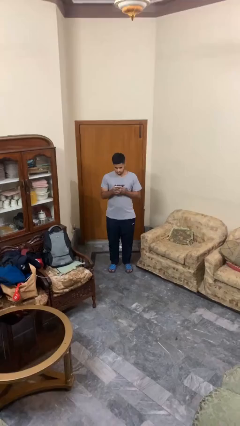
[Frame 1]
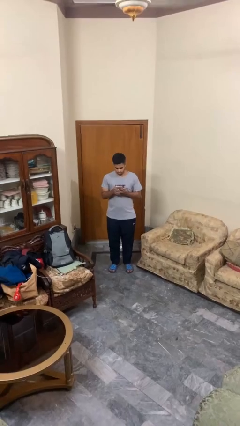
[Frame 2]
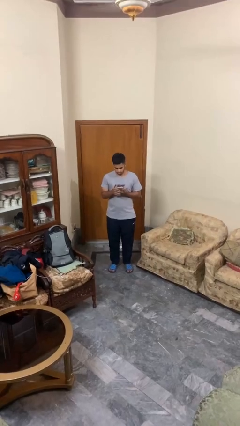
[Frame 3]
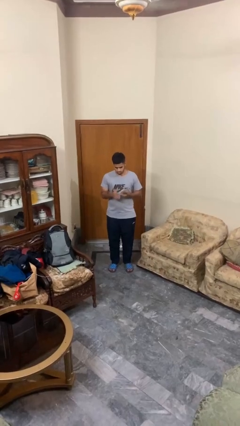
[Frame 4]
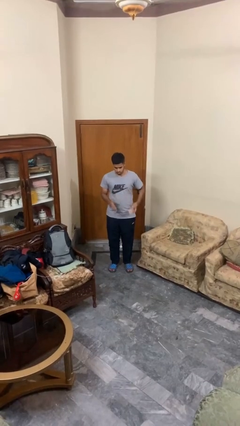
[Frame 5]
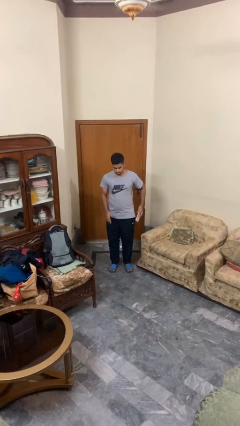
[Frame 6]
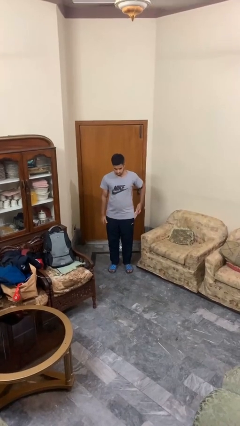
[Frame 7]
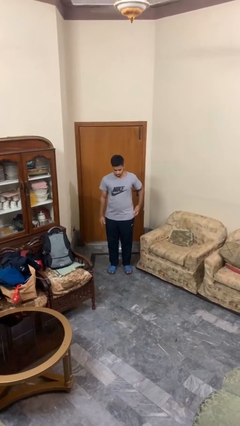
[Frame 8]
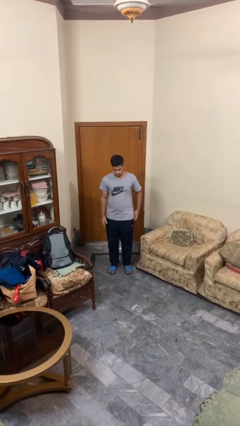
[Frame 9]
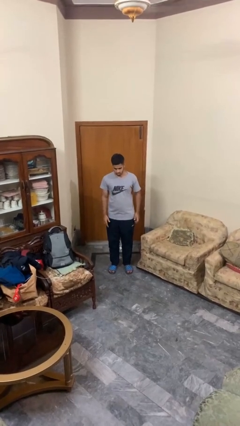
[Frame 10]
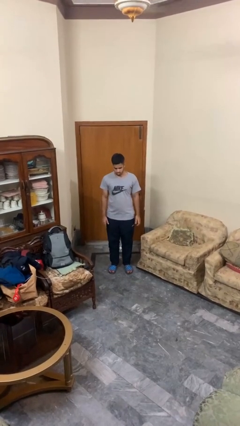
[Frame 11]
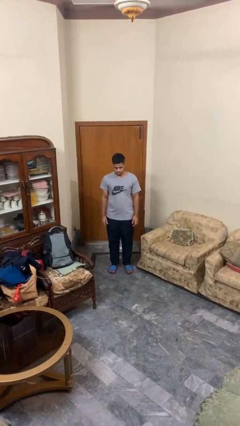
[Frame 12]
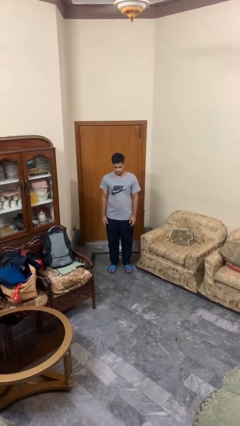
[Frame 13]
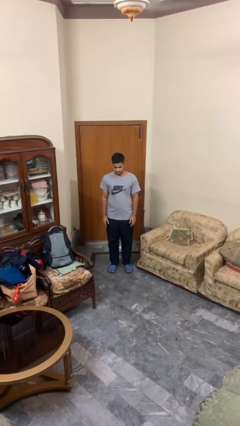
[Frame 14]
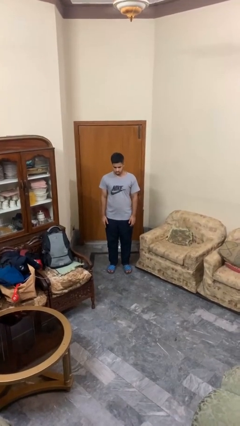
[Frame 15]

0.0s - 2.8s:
person puts phone into pocket

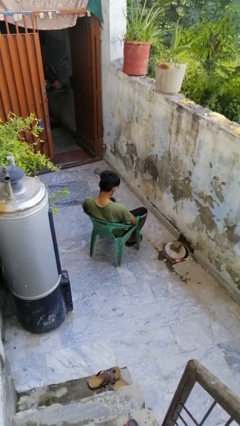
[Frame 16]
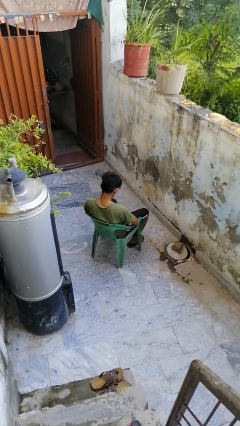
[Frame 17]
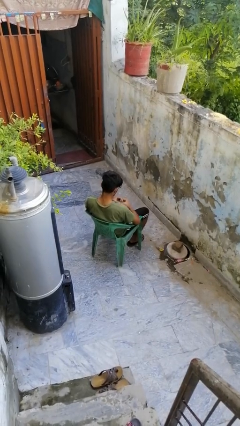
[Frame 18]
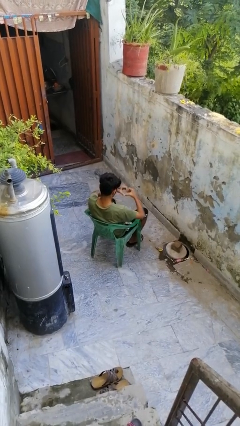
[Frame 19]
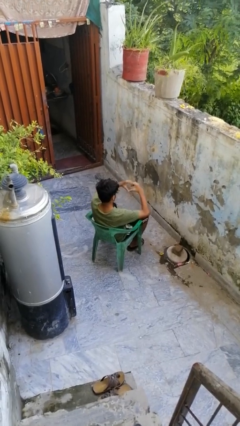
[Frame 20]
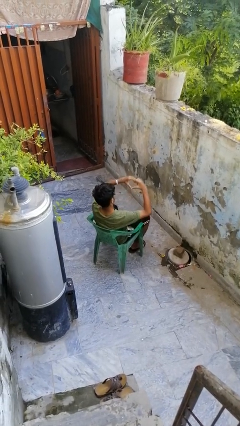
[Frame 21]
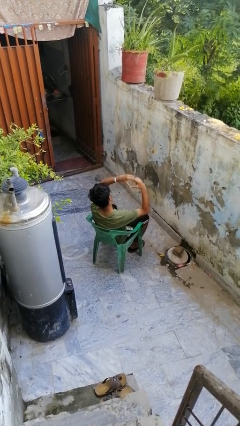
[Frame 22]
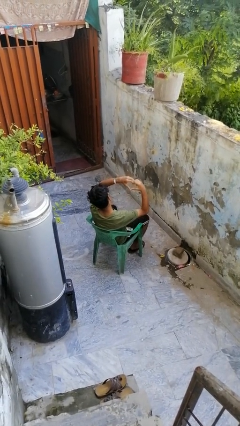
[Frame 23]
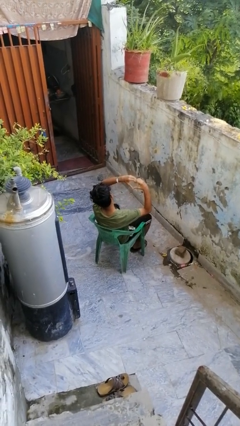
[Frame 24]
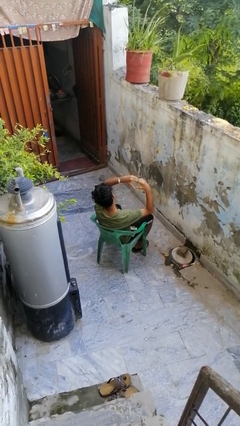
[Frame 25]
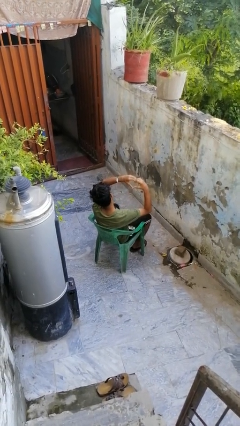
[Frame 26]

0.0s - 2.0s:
person gestures heart

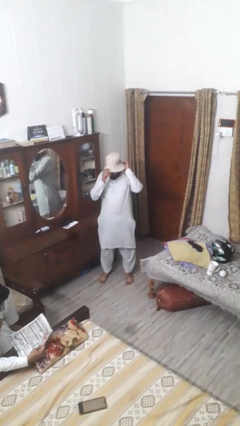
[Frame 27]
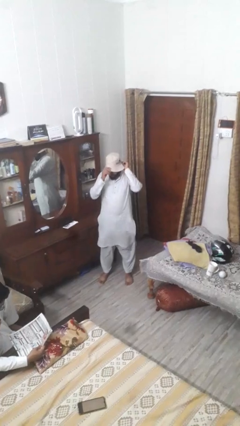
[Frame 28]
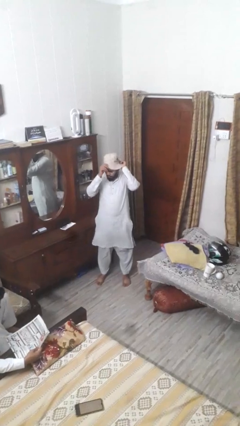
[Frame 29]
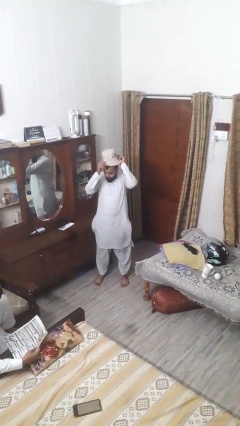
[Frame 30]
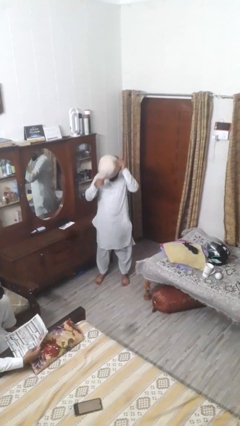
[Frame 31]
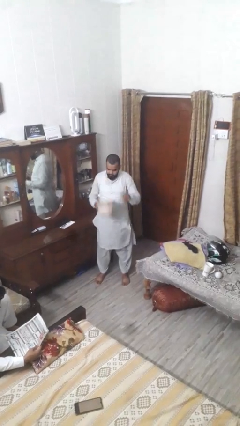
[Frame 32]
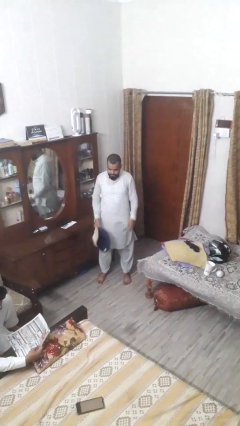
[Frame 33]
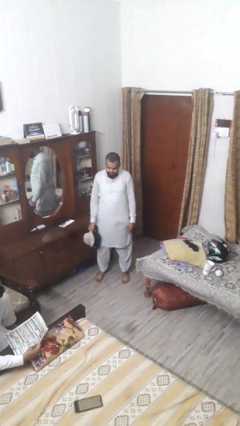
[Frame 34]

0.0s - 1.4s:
person takes off hat

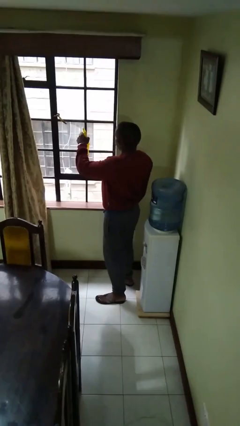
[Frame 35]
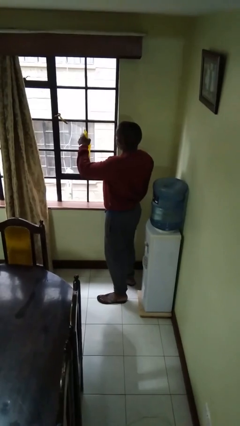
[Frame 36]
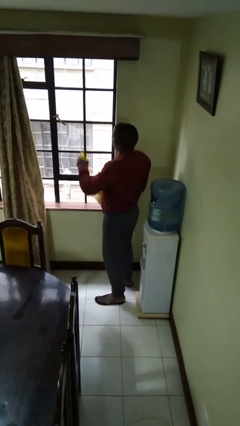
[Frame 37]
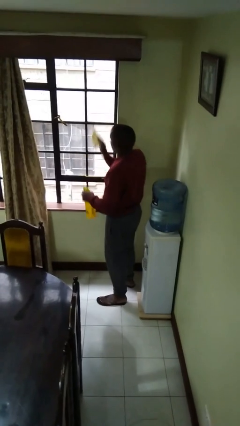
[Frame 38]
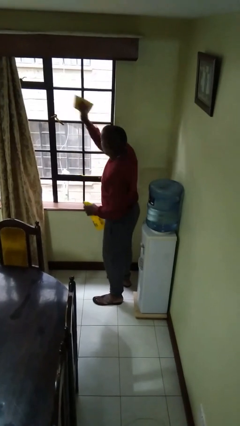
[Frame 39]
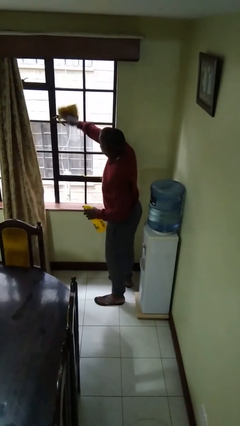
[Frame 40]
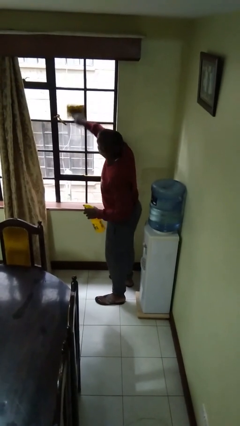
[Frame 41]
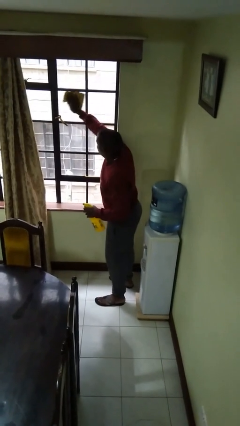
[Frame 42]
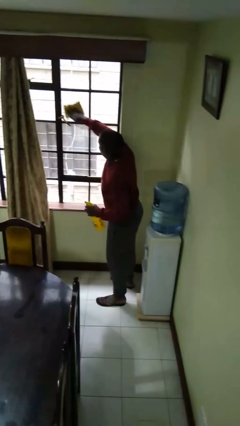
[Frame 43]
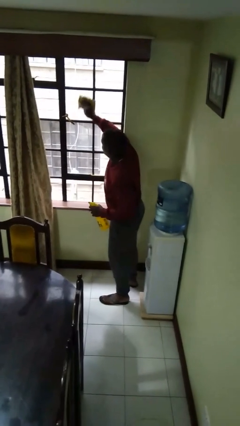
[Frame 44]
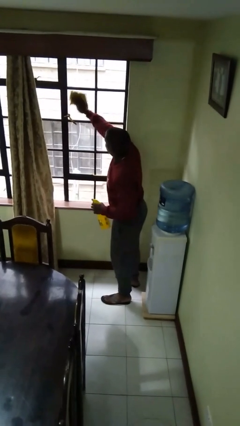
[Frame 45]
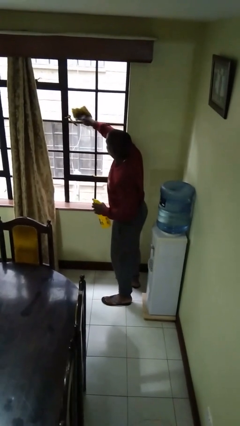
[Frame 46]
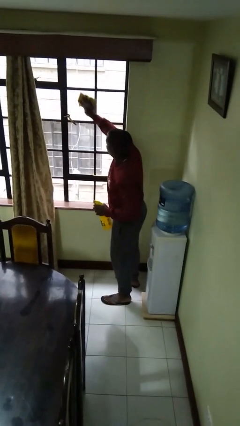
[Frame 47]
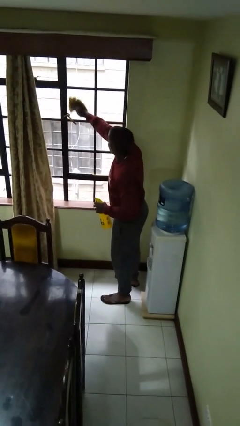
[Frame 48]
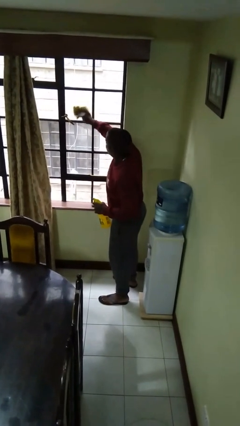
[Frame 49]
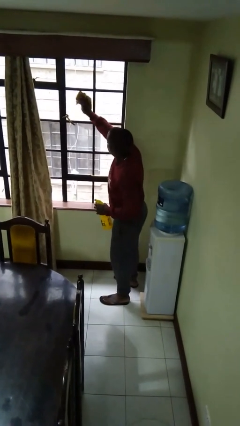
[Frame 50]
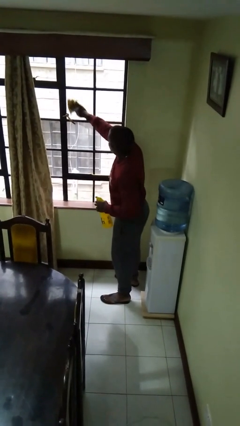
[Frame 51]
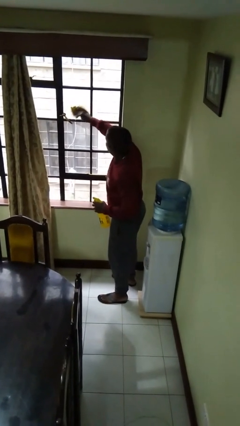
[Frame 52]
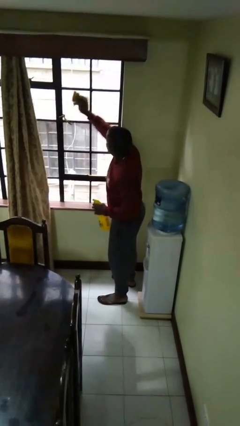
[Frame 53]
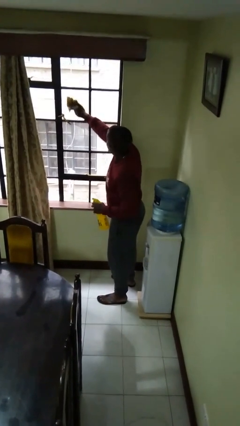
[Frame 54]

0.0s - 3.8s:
person washes window

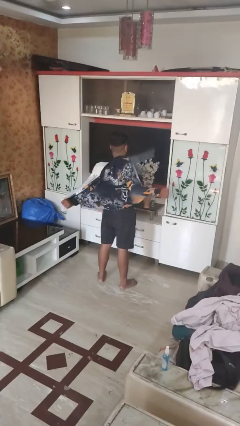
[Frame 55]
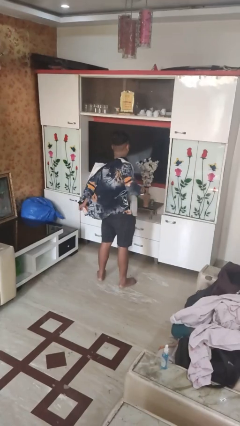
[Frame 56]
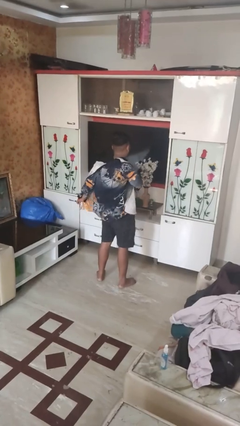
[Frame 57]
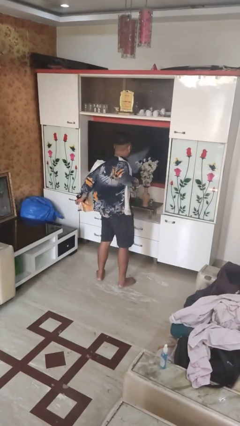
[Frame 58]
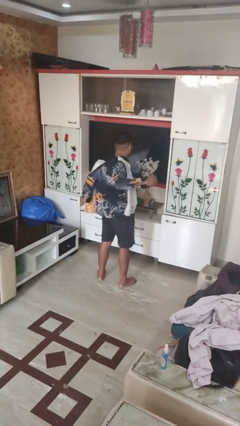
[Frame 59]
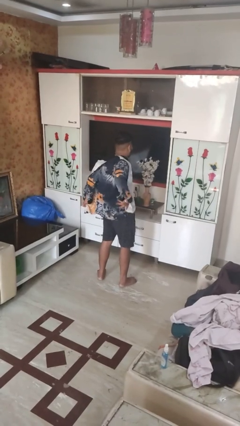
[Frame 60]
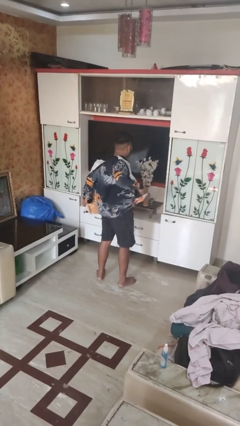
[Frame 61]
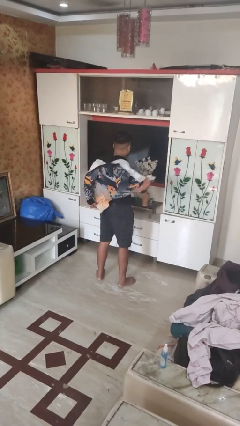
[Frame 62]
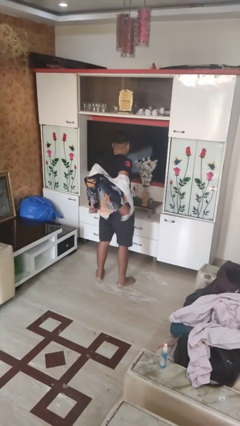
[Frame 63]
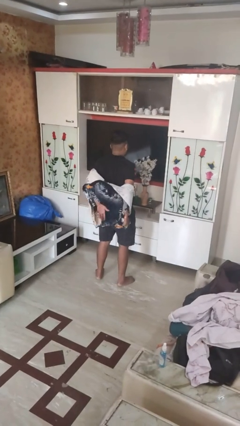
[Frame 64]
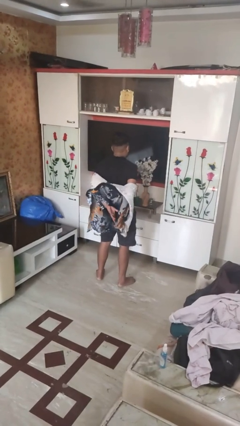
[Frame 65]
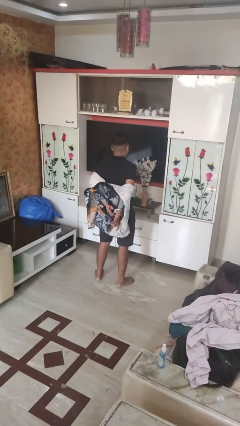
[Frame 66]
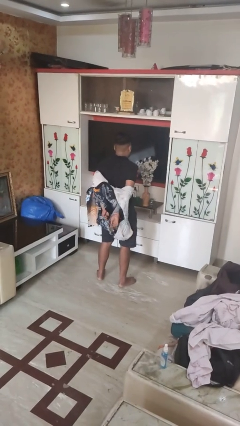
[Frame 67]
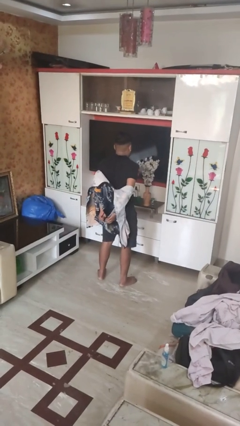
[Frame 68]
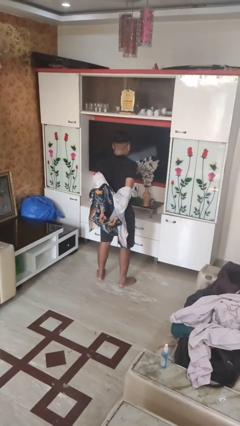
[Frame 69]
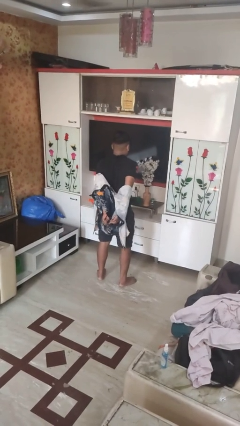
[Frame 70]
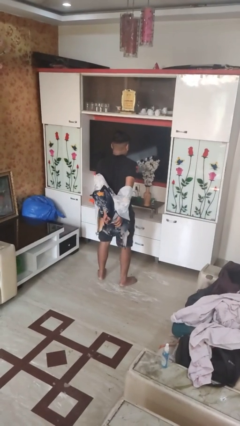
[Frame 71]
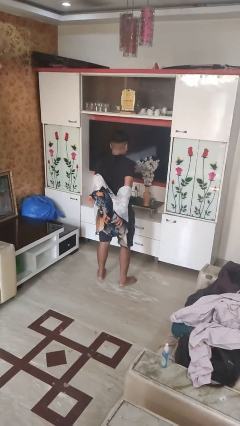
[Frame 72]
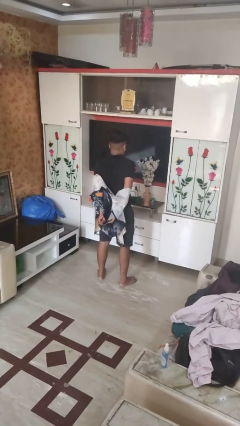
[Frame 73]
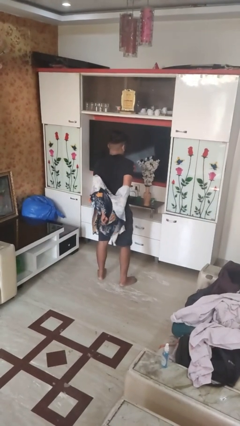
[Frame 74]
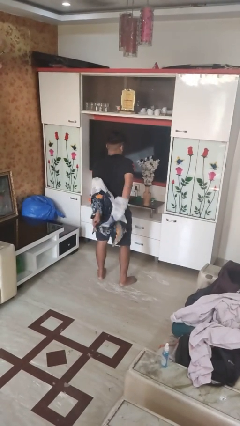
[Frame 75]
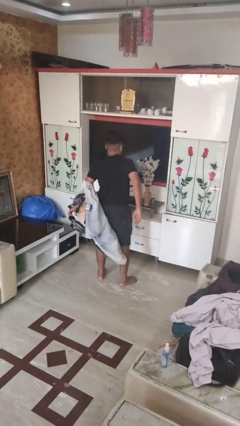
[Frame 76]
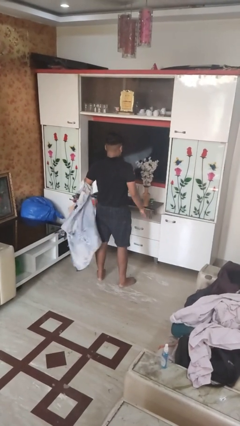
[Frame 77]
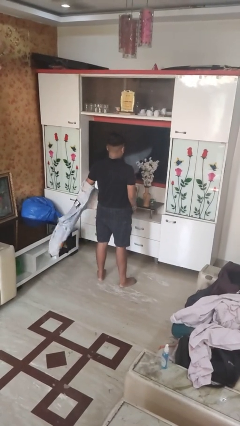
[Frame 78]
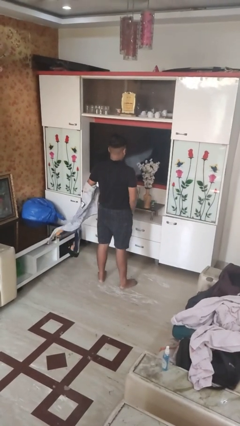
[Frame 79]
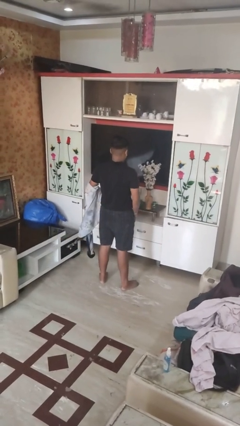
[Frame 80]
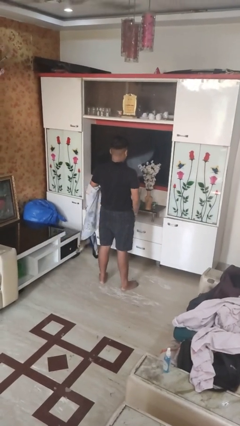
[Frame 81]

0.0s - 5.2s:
person takes off shirt

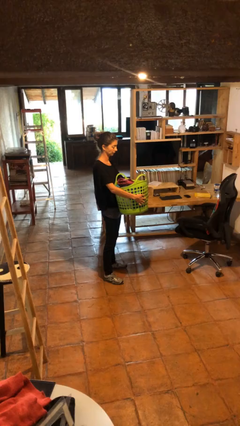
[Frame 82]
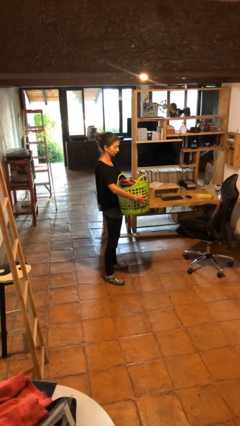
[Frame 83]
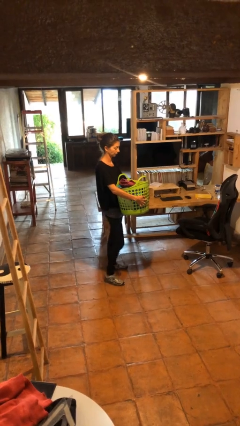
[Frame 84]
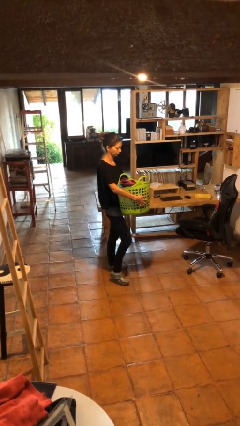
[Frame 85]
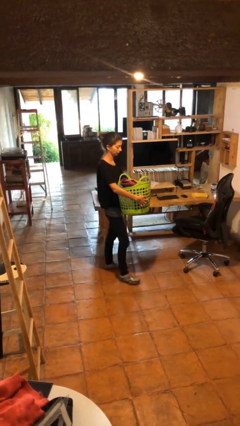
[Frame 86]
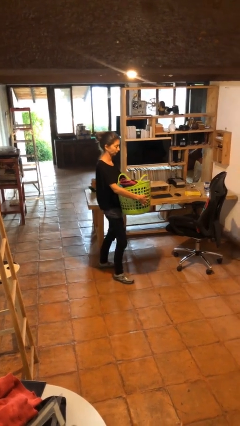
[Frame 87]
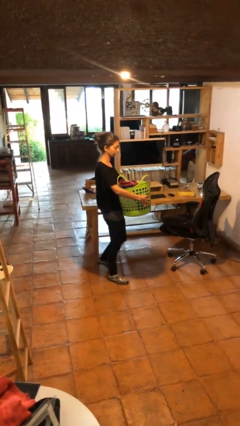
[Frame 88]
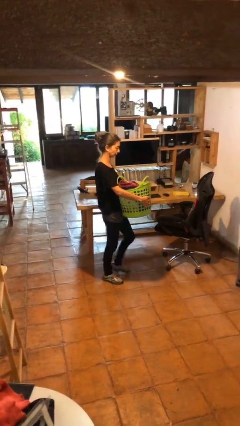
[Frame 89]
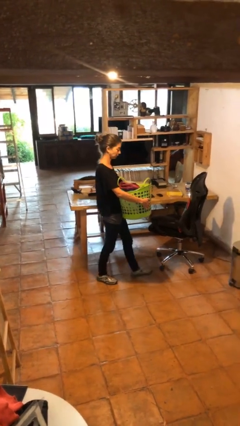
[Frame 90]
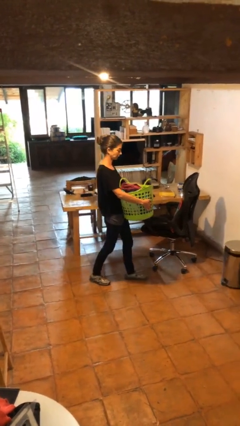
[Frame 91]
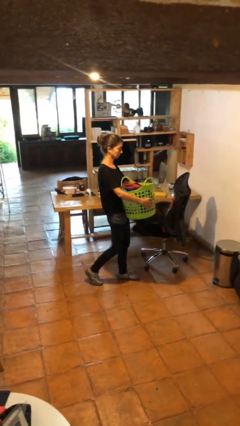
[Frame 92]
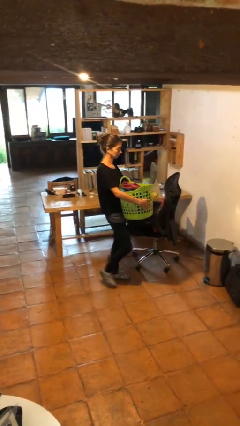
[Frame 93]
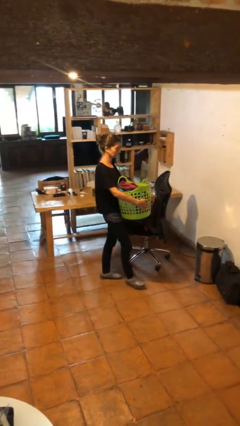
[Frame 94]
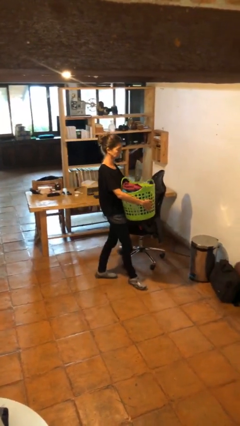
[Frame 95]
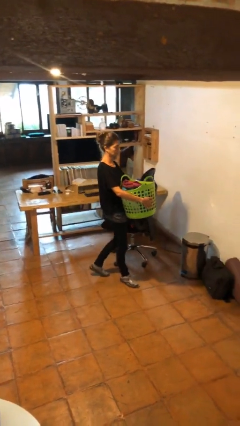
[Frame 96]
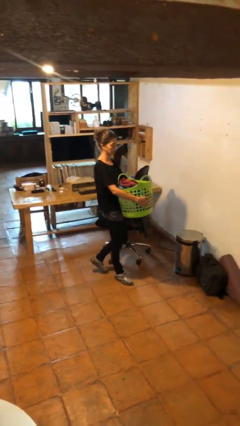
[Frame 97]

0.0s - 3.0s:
person carries laundry basket
